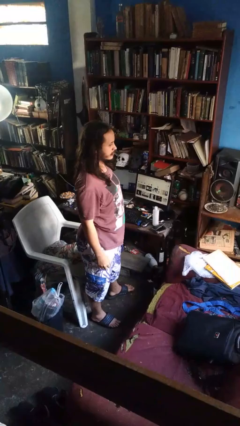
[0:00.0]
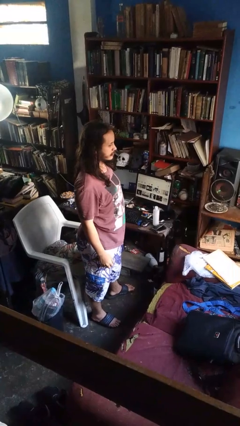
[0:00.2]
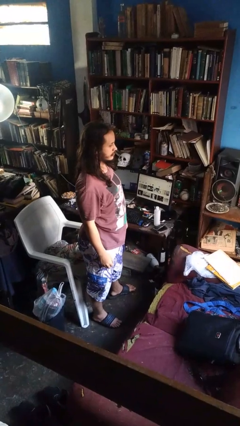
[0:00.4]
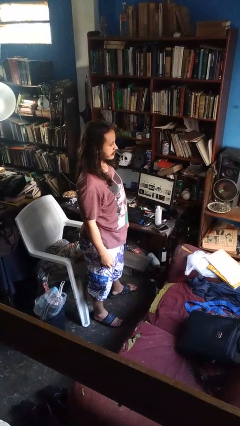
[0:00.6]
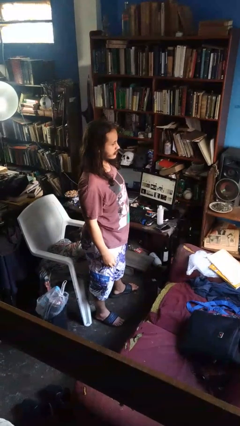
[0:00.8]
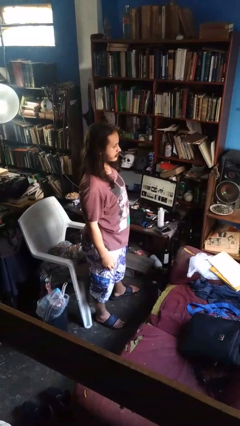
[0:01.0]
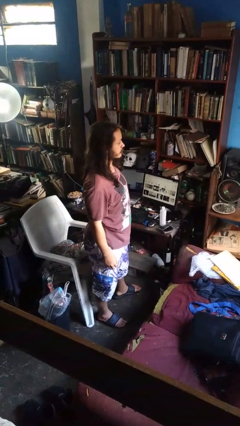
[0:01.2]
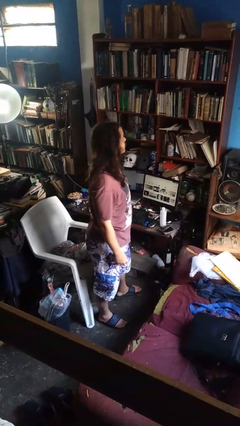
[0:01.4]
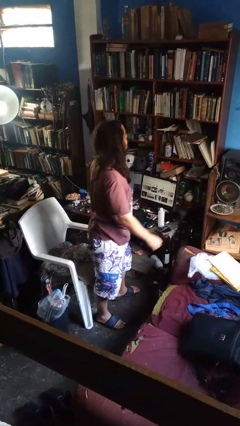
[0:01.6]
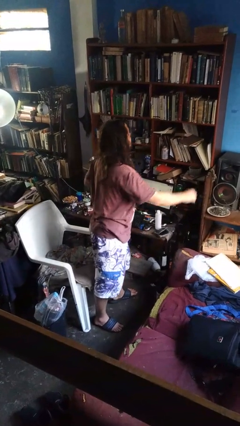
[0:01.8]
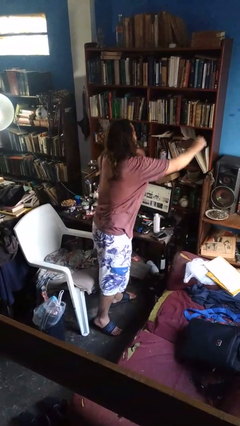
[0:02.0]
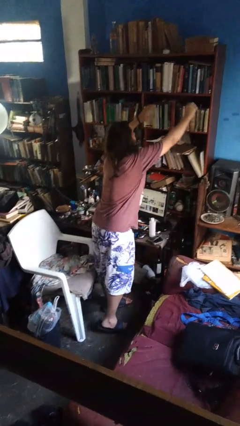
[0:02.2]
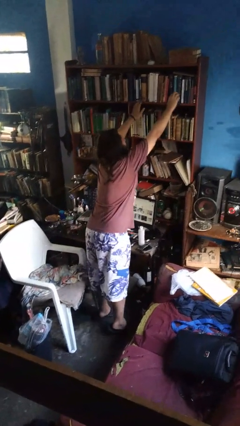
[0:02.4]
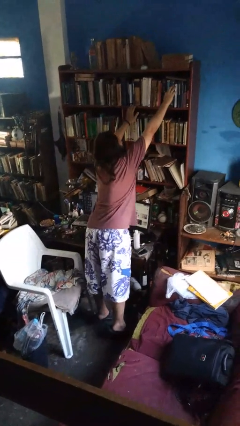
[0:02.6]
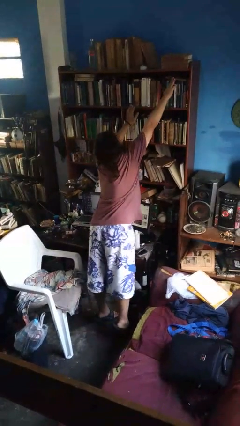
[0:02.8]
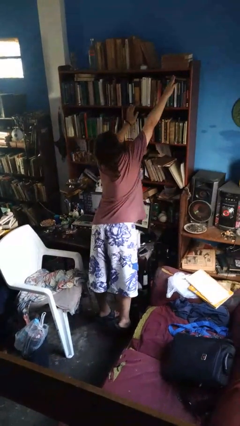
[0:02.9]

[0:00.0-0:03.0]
person picks up object from shelf

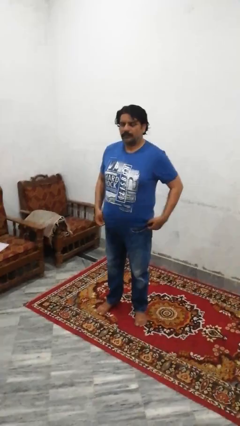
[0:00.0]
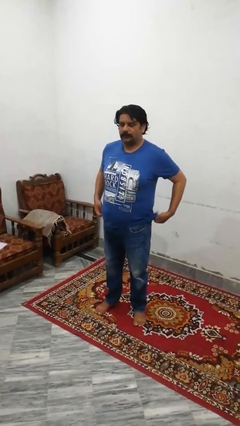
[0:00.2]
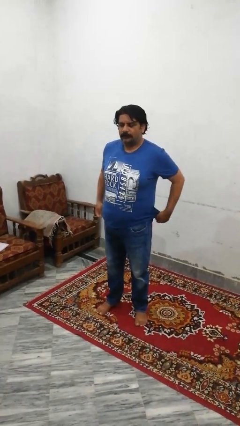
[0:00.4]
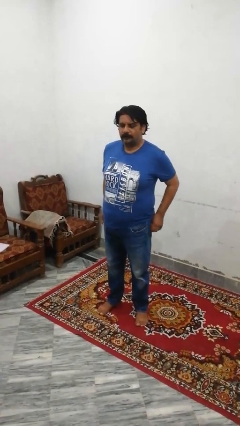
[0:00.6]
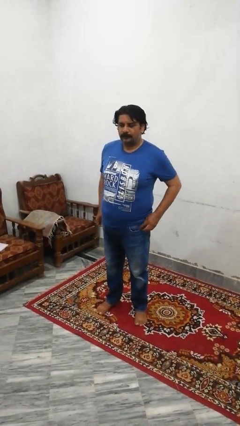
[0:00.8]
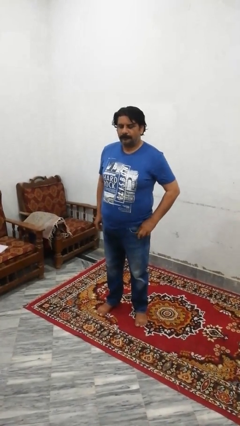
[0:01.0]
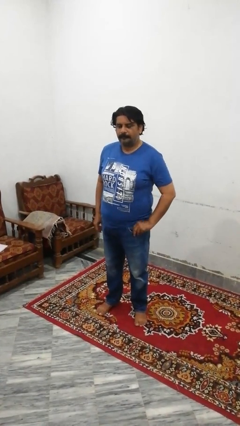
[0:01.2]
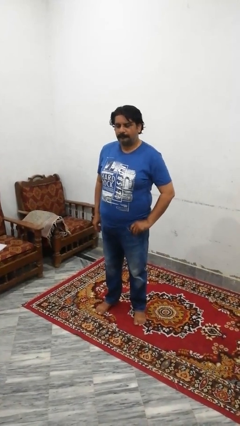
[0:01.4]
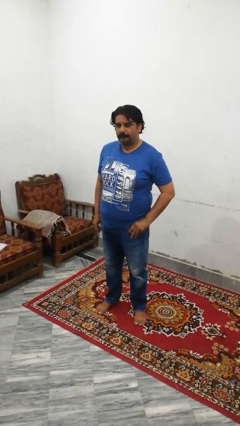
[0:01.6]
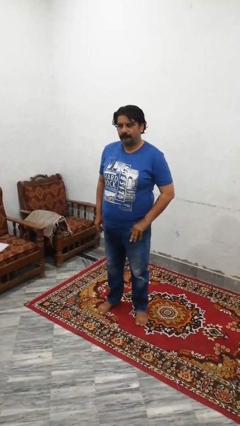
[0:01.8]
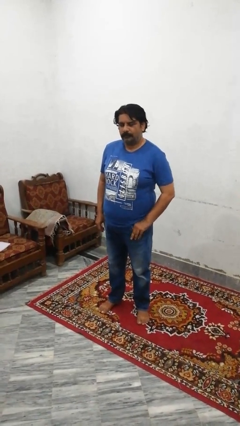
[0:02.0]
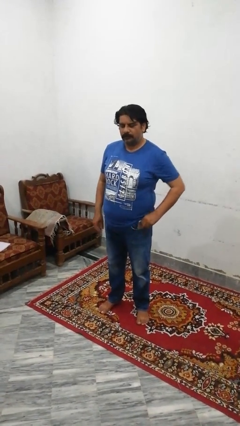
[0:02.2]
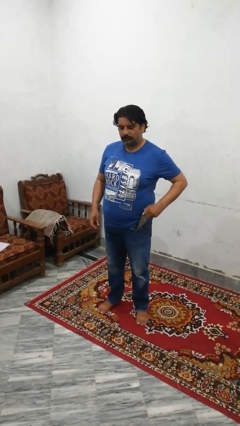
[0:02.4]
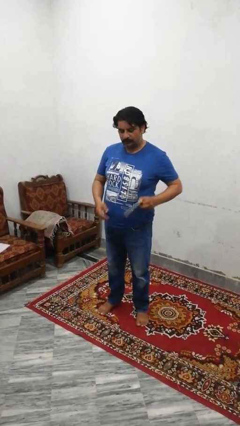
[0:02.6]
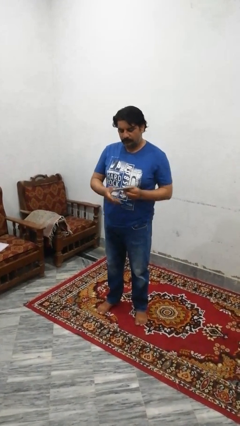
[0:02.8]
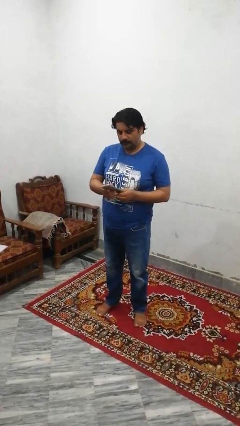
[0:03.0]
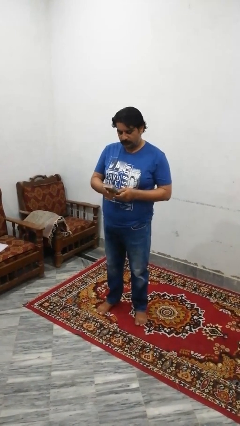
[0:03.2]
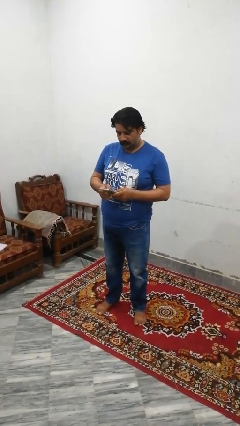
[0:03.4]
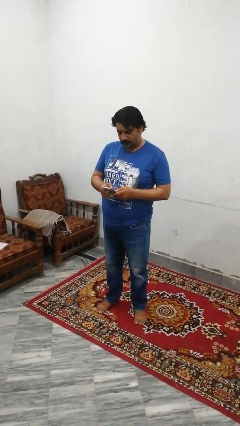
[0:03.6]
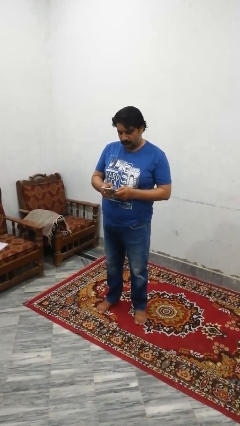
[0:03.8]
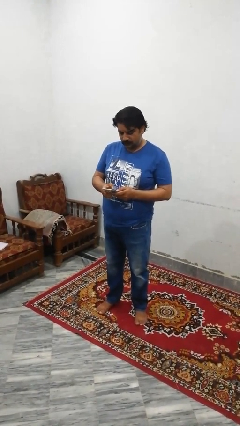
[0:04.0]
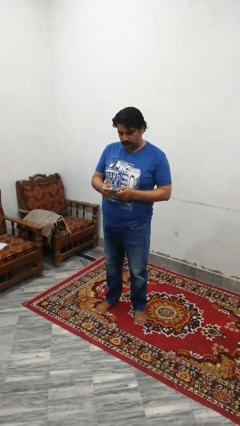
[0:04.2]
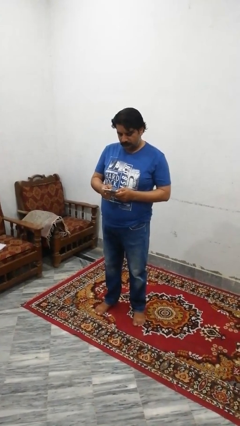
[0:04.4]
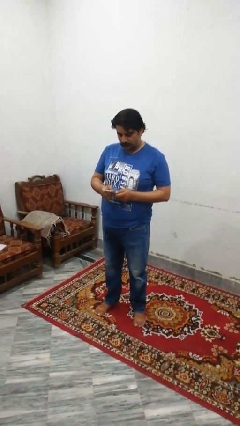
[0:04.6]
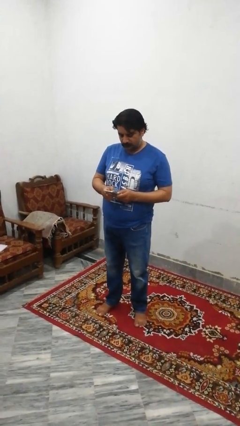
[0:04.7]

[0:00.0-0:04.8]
person takes phone from pocket

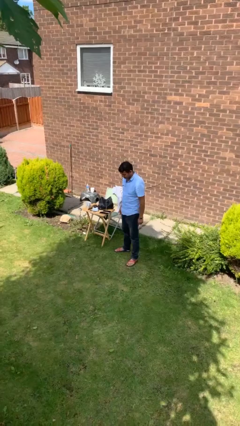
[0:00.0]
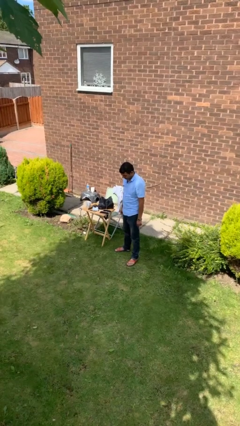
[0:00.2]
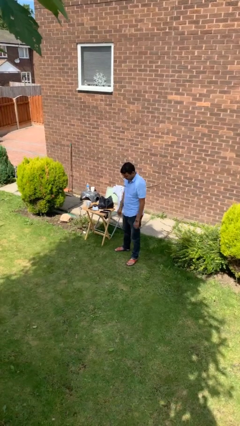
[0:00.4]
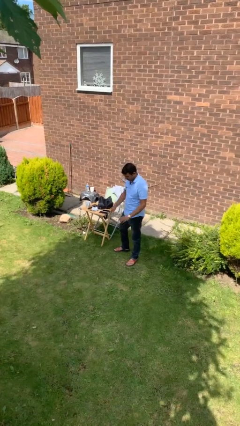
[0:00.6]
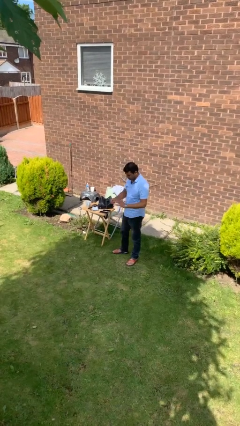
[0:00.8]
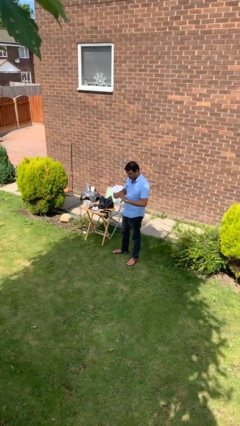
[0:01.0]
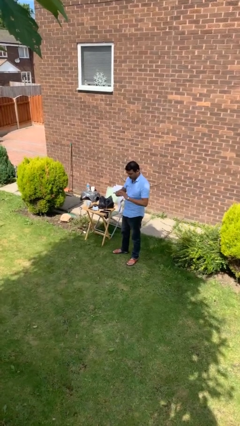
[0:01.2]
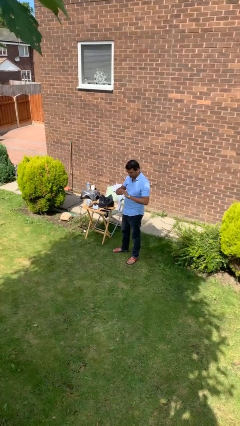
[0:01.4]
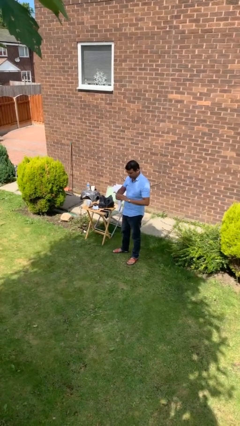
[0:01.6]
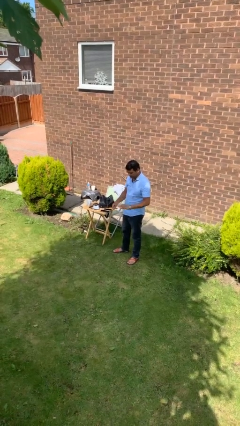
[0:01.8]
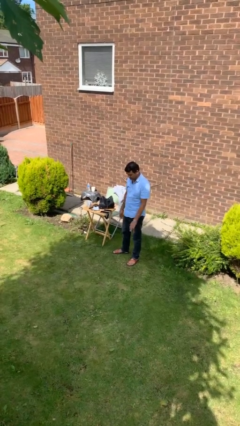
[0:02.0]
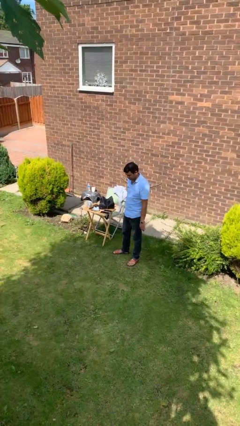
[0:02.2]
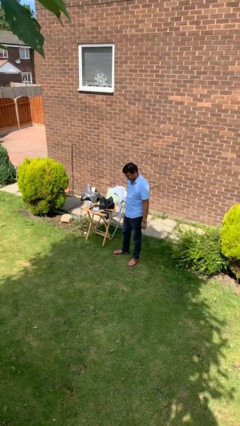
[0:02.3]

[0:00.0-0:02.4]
person puts on ring

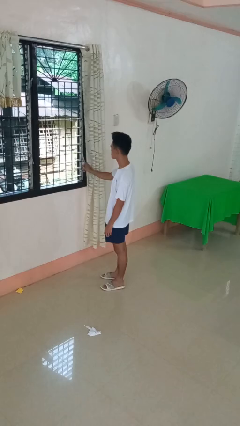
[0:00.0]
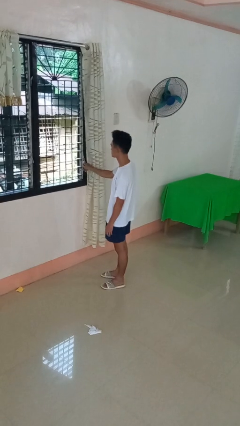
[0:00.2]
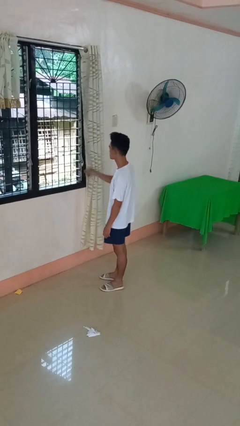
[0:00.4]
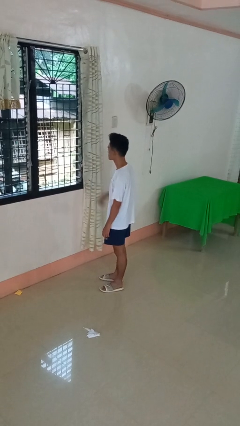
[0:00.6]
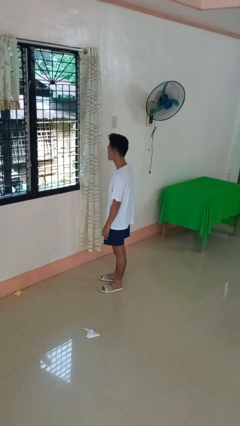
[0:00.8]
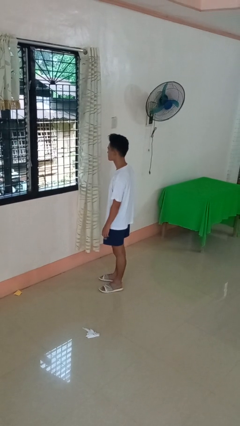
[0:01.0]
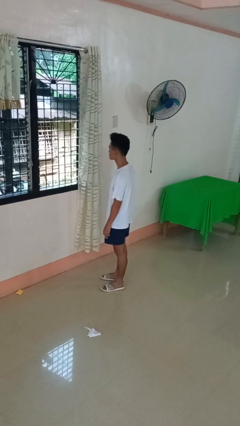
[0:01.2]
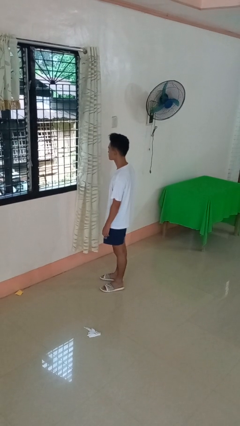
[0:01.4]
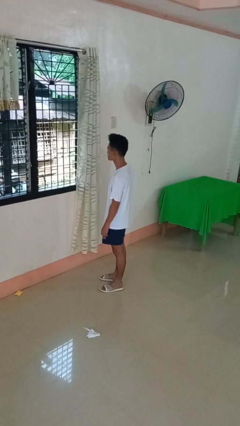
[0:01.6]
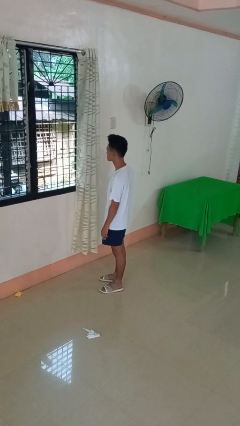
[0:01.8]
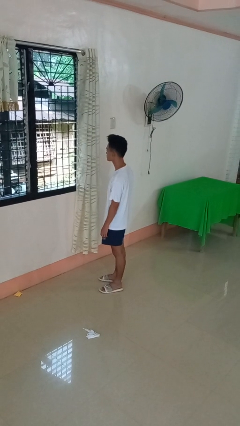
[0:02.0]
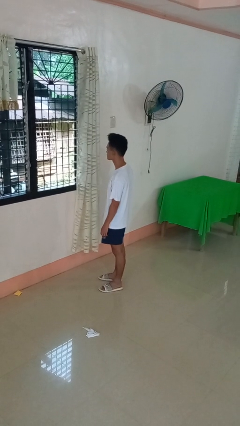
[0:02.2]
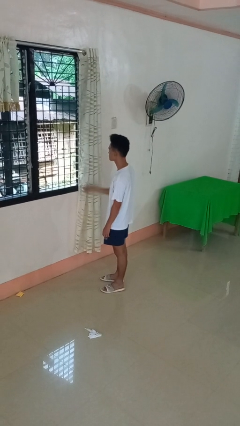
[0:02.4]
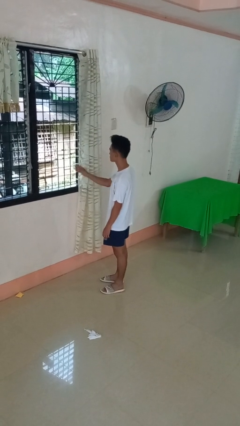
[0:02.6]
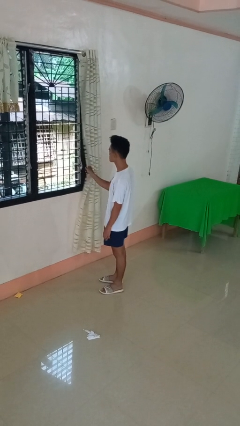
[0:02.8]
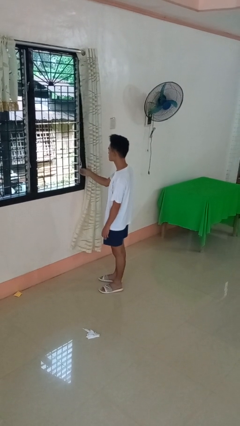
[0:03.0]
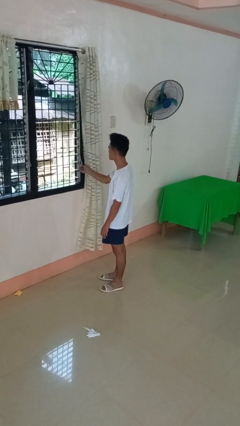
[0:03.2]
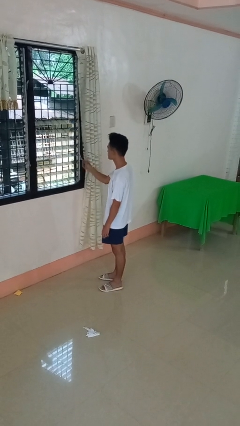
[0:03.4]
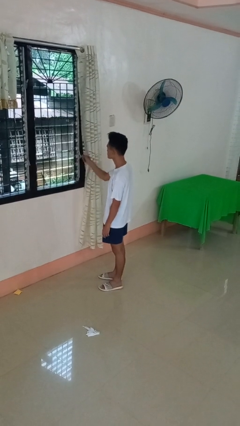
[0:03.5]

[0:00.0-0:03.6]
person opens home window

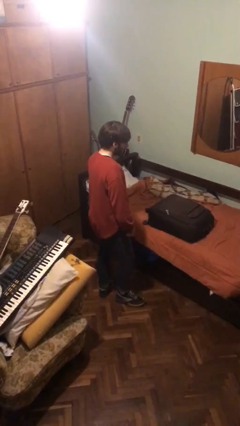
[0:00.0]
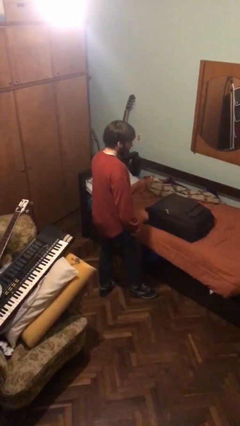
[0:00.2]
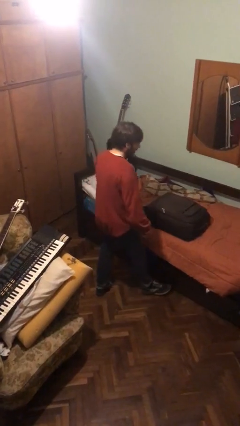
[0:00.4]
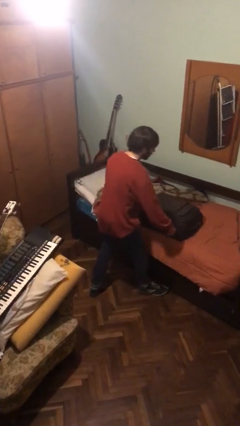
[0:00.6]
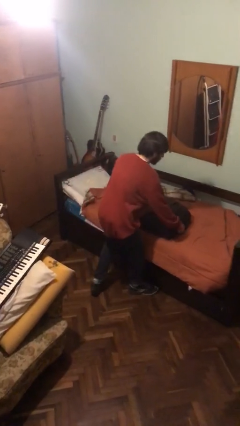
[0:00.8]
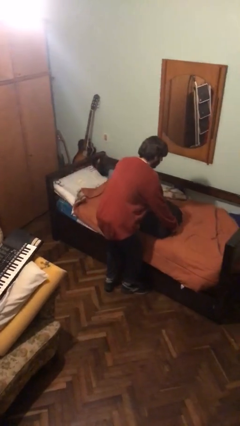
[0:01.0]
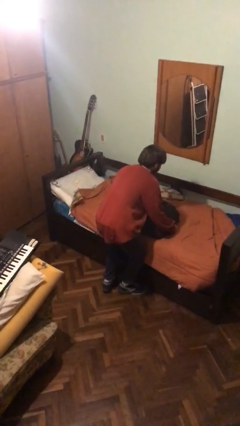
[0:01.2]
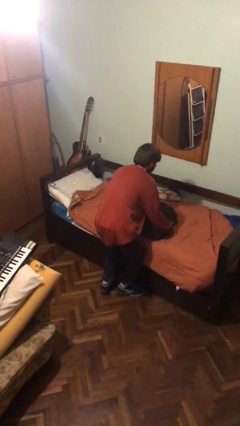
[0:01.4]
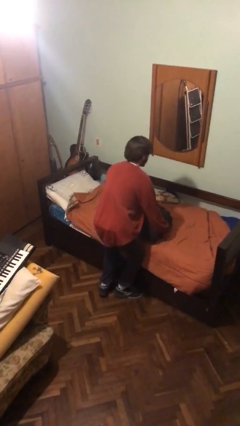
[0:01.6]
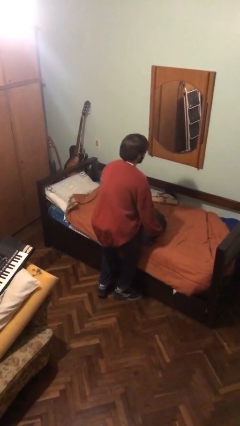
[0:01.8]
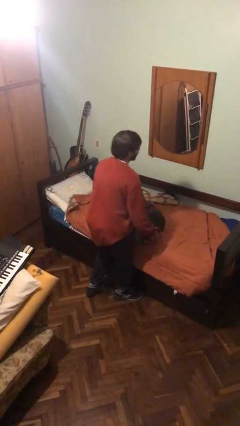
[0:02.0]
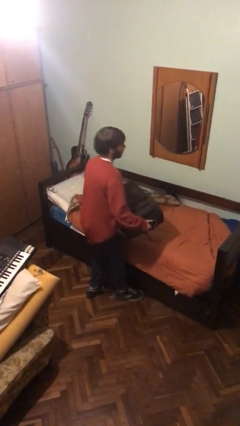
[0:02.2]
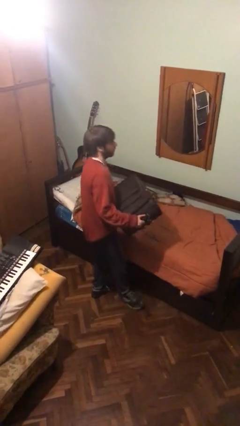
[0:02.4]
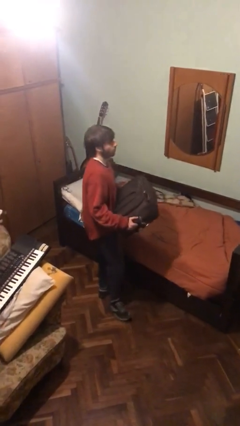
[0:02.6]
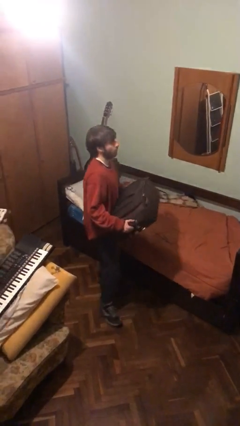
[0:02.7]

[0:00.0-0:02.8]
person picks up object from bed

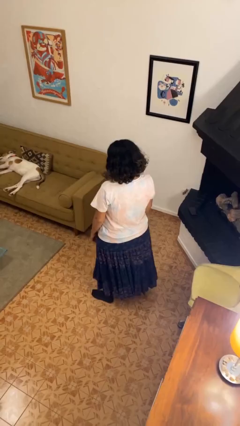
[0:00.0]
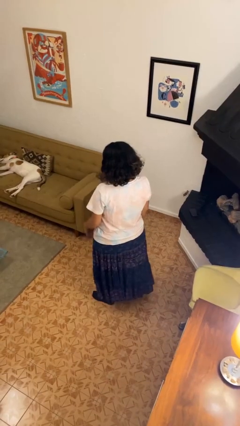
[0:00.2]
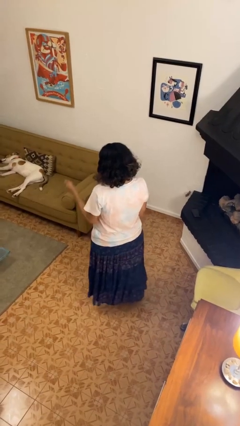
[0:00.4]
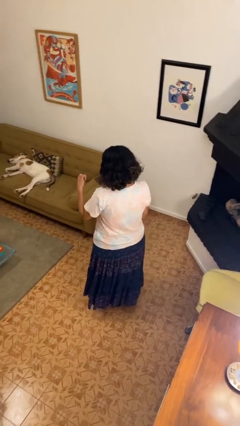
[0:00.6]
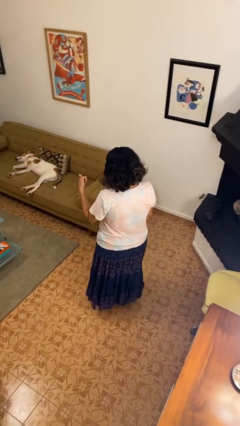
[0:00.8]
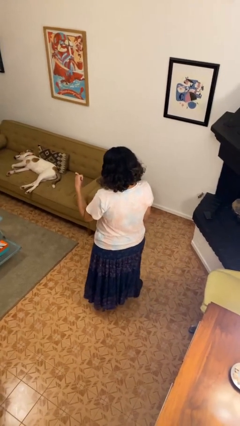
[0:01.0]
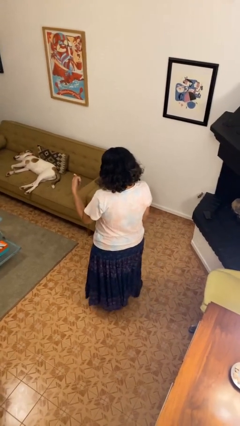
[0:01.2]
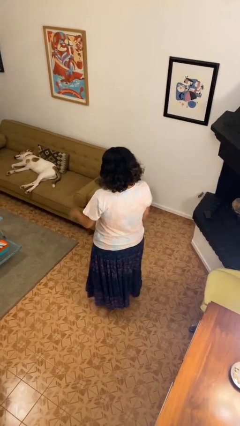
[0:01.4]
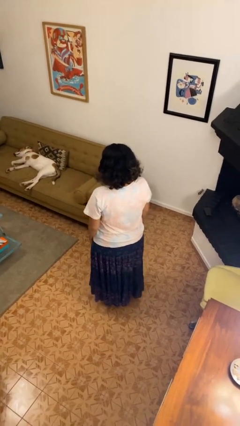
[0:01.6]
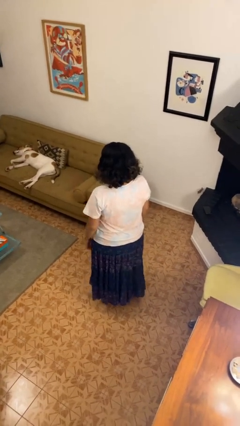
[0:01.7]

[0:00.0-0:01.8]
person gestures thumbs up
